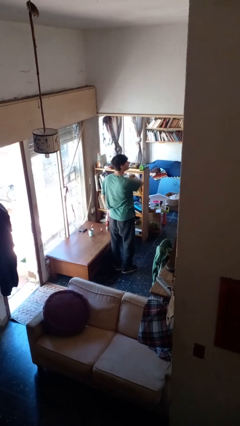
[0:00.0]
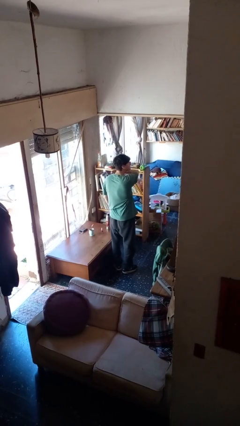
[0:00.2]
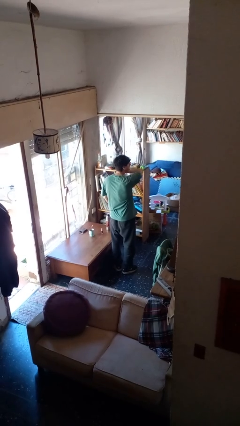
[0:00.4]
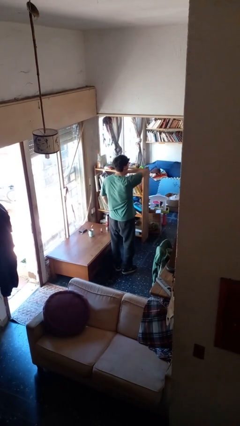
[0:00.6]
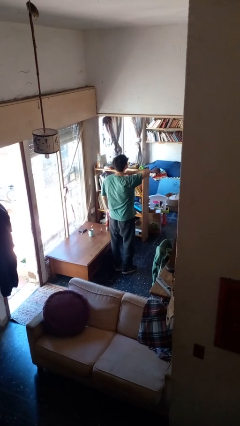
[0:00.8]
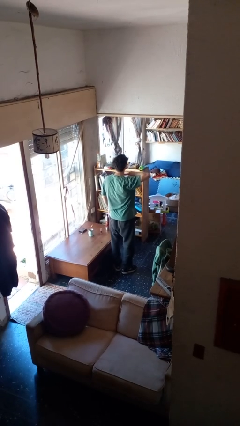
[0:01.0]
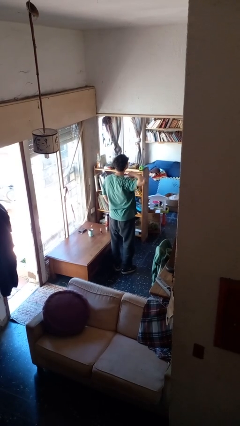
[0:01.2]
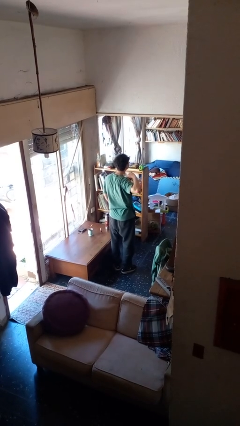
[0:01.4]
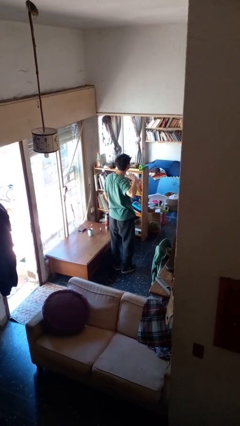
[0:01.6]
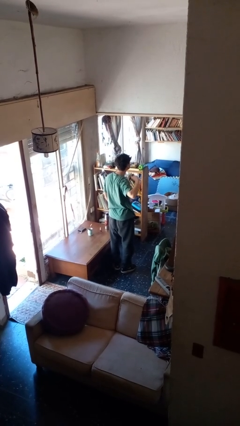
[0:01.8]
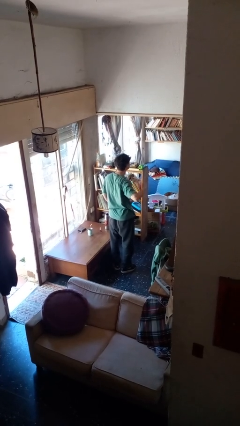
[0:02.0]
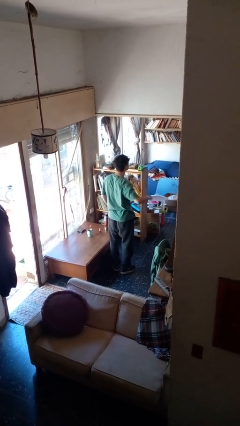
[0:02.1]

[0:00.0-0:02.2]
person gestures cut

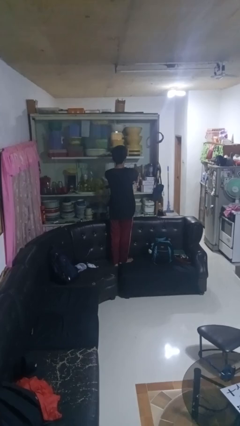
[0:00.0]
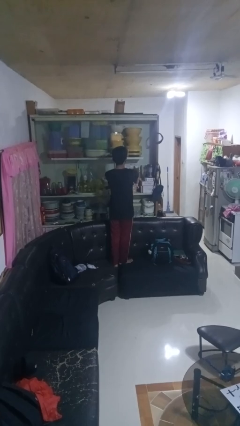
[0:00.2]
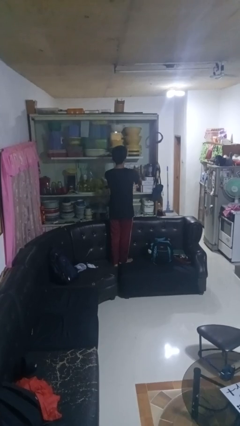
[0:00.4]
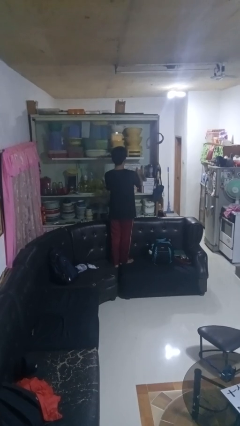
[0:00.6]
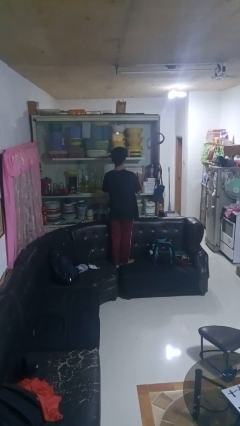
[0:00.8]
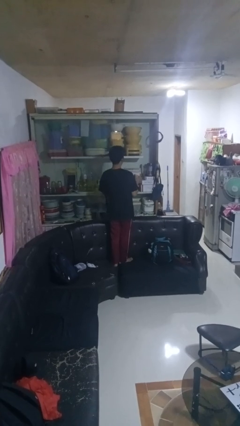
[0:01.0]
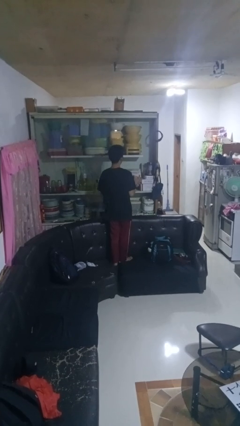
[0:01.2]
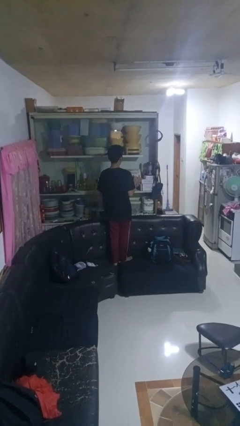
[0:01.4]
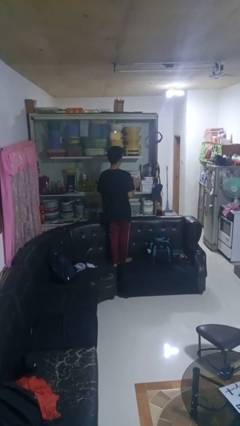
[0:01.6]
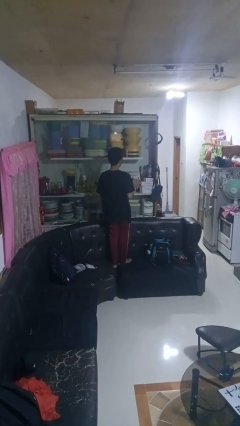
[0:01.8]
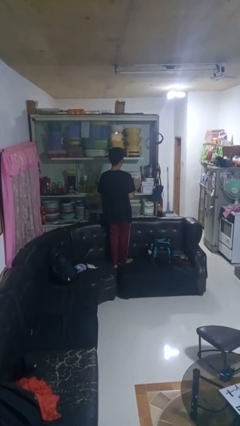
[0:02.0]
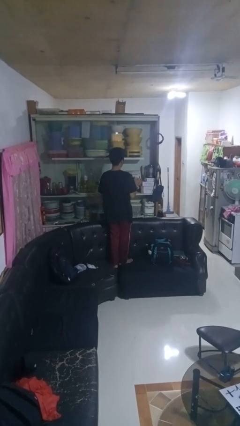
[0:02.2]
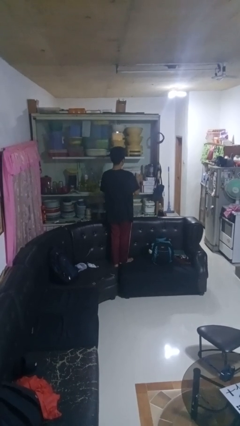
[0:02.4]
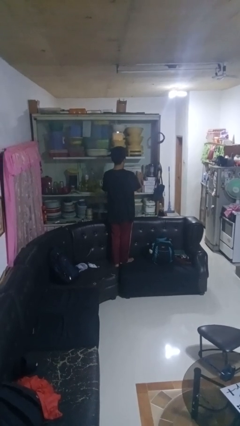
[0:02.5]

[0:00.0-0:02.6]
person picks up object from cabinet

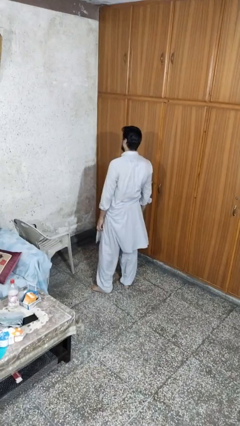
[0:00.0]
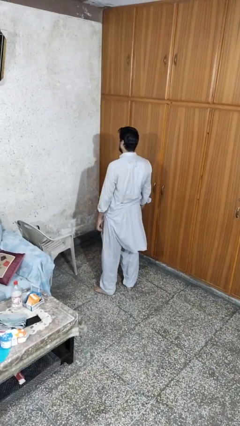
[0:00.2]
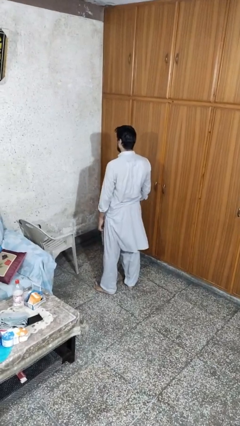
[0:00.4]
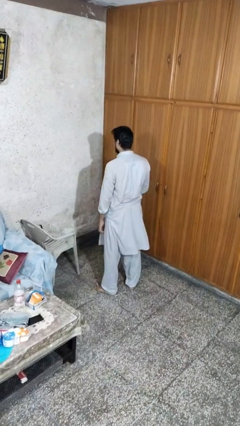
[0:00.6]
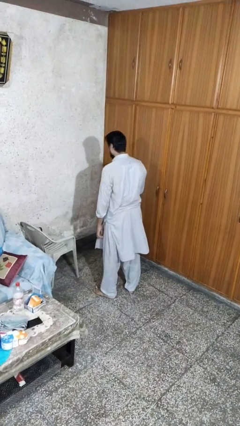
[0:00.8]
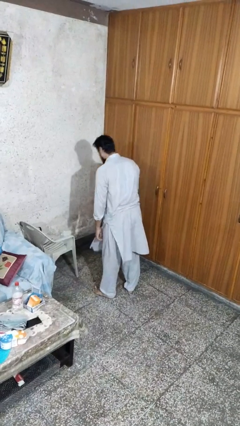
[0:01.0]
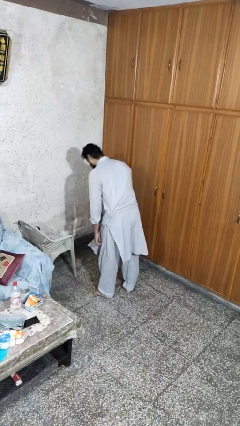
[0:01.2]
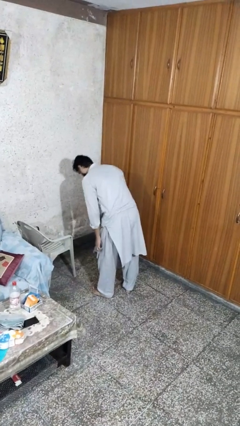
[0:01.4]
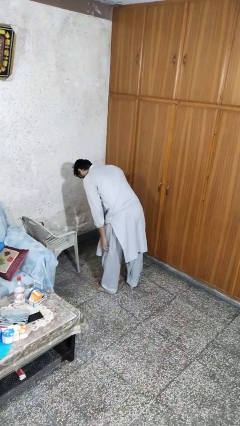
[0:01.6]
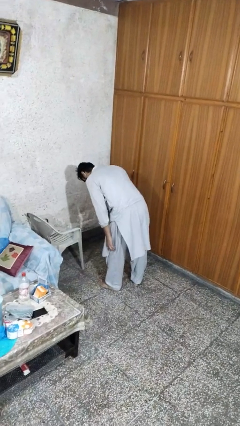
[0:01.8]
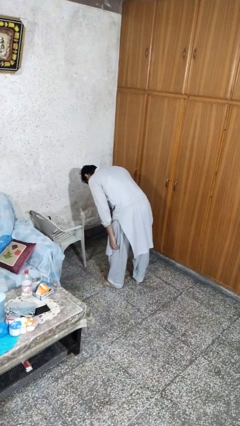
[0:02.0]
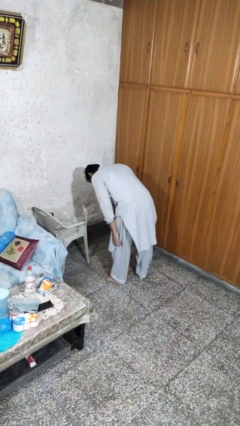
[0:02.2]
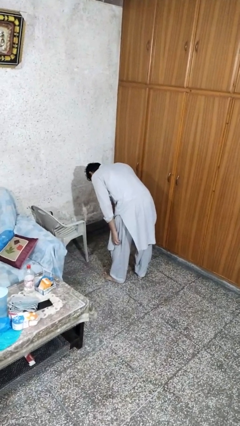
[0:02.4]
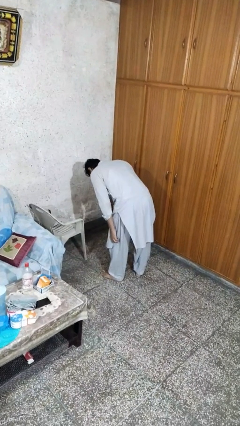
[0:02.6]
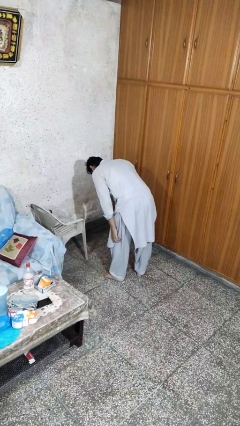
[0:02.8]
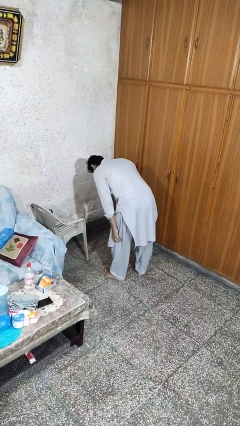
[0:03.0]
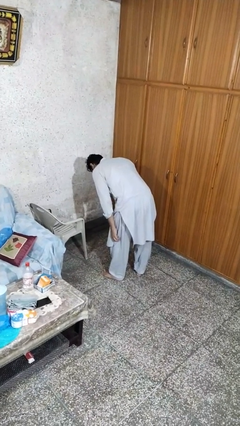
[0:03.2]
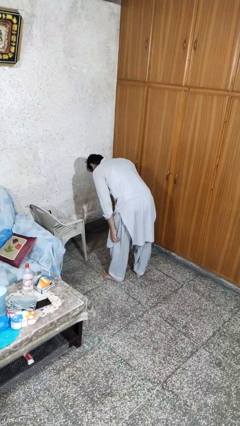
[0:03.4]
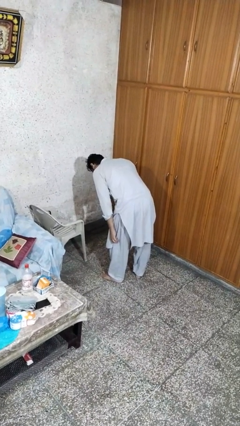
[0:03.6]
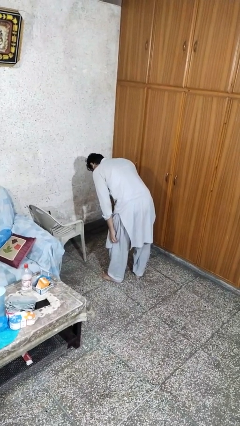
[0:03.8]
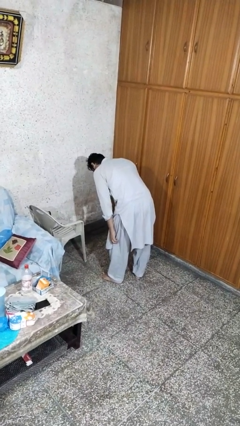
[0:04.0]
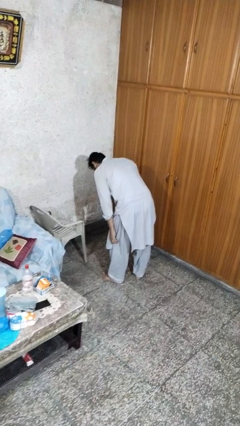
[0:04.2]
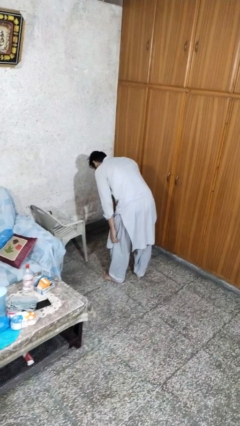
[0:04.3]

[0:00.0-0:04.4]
person bows

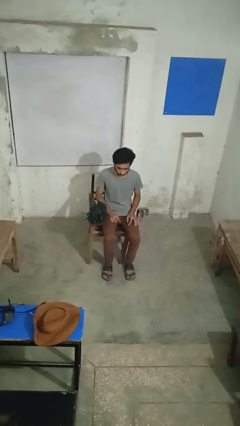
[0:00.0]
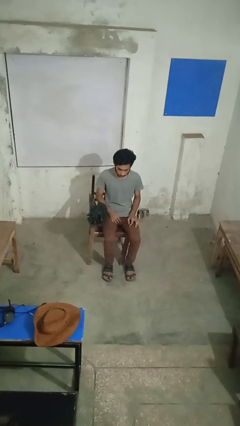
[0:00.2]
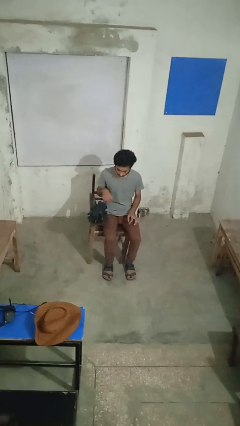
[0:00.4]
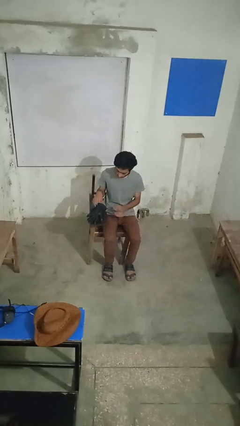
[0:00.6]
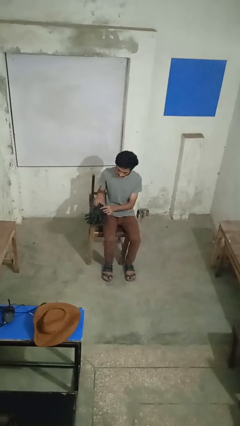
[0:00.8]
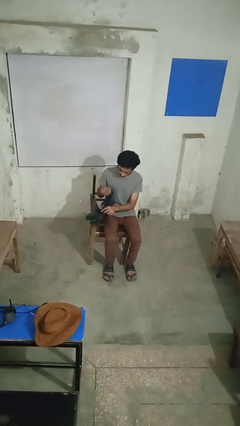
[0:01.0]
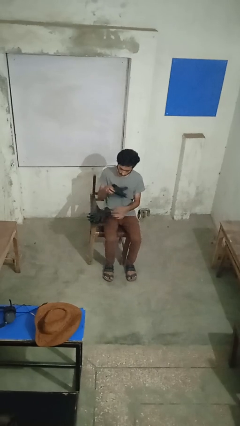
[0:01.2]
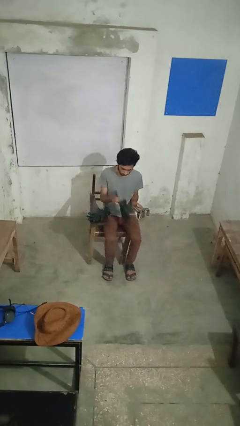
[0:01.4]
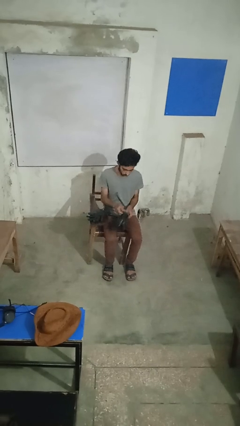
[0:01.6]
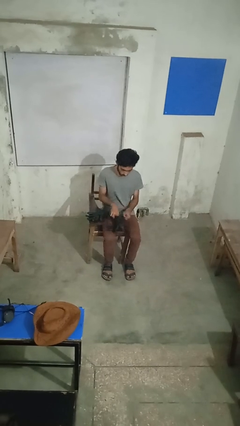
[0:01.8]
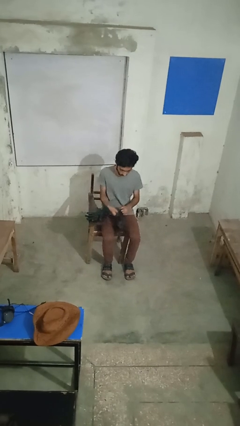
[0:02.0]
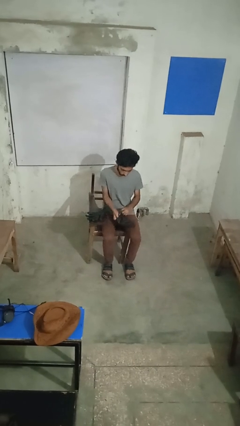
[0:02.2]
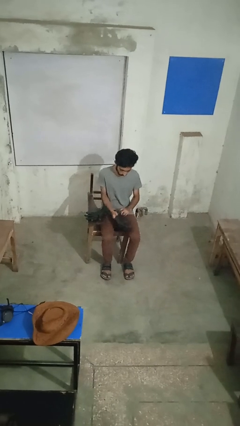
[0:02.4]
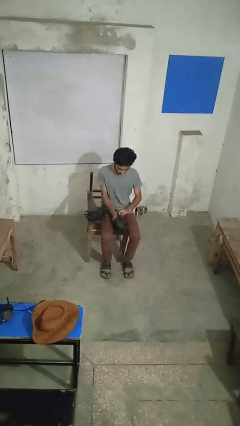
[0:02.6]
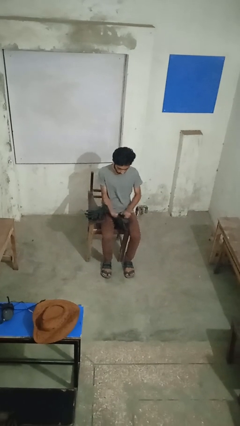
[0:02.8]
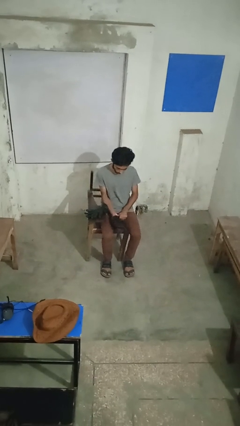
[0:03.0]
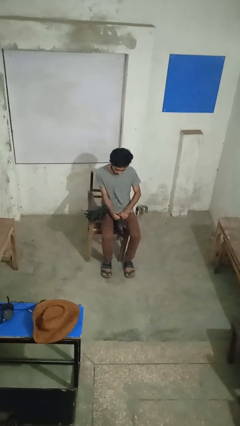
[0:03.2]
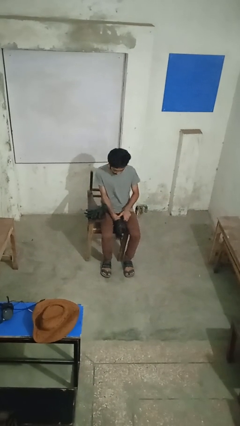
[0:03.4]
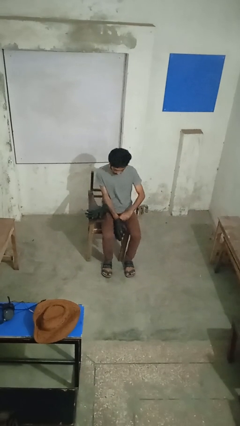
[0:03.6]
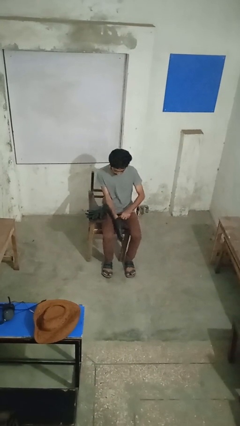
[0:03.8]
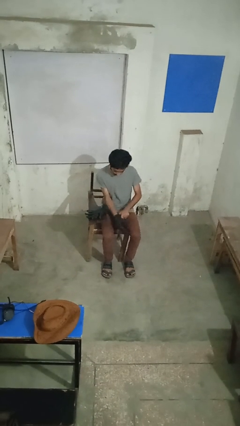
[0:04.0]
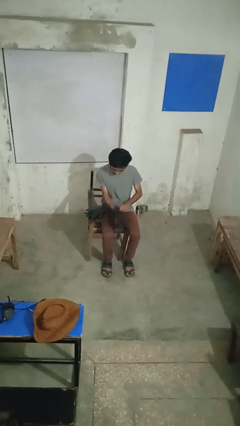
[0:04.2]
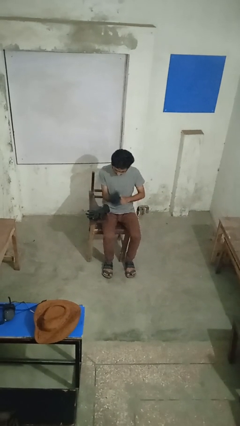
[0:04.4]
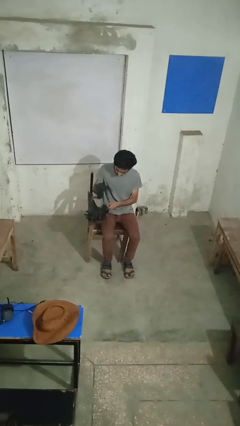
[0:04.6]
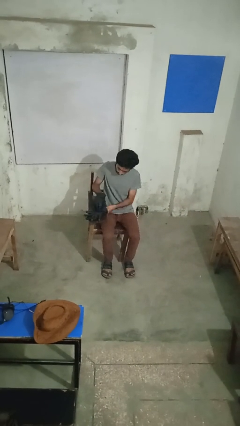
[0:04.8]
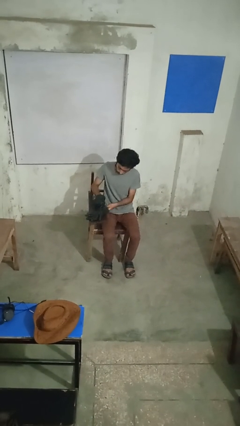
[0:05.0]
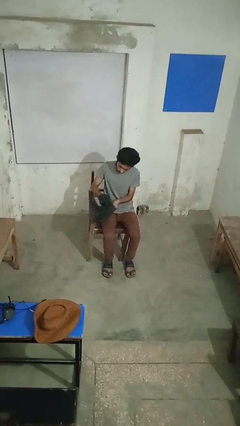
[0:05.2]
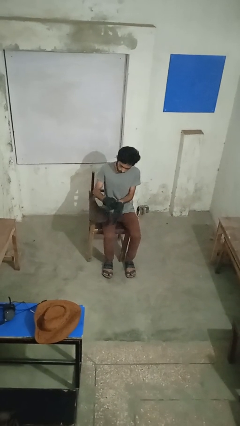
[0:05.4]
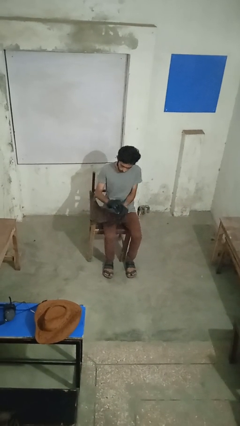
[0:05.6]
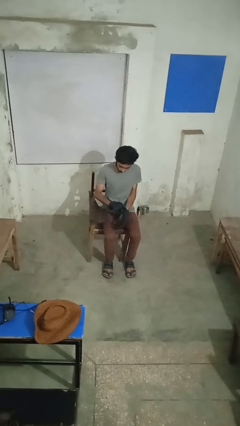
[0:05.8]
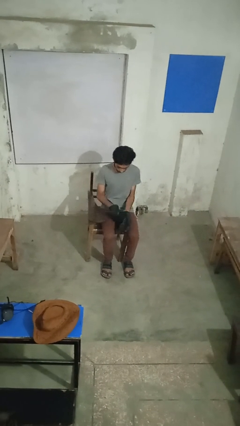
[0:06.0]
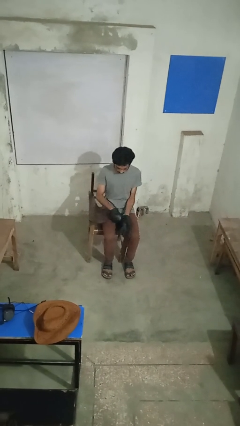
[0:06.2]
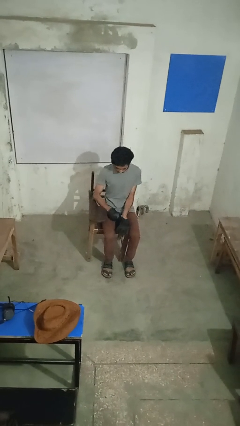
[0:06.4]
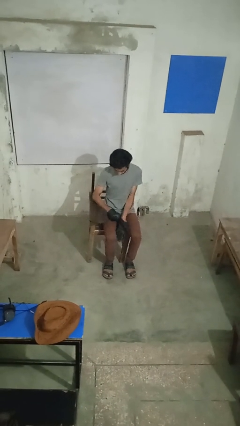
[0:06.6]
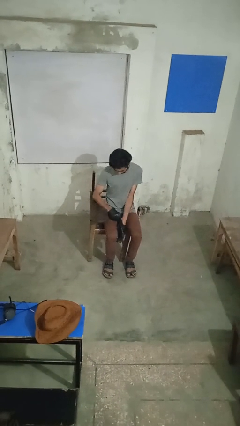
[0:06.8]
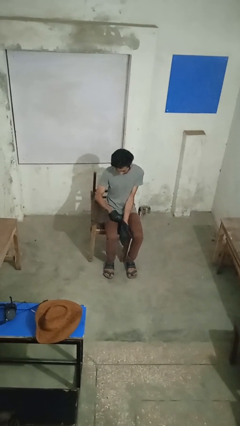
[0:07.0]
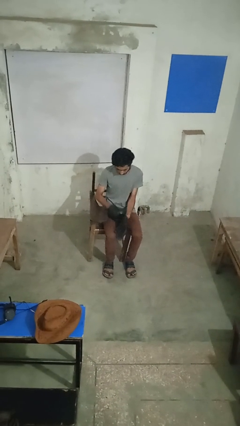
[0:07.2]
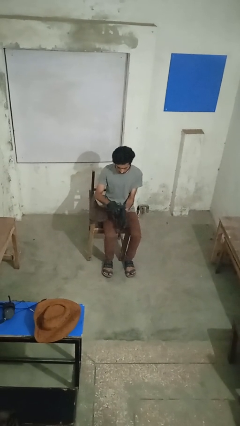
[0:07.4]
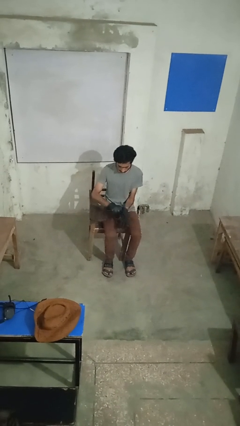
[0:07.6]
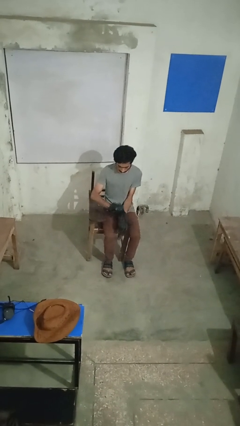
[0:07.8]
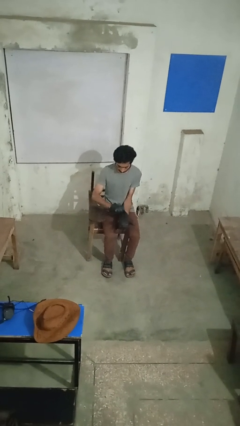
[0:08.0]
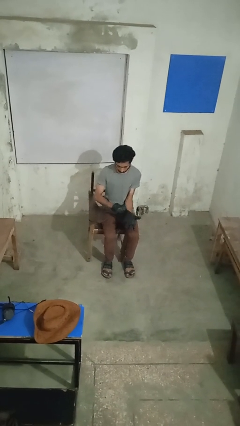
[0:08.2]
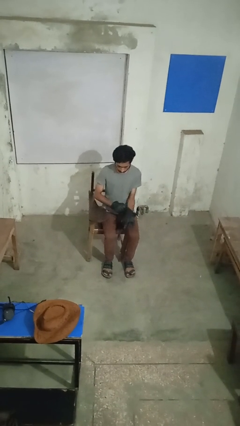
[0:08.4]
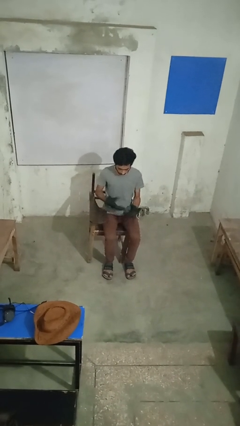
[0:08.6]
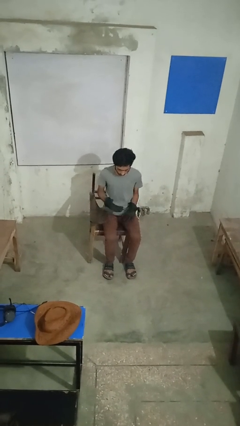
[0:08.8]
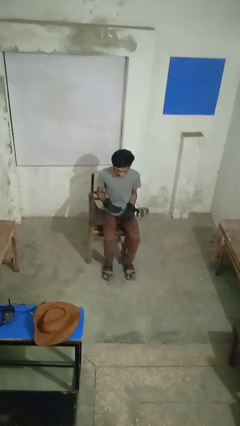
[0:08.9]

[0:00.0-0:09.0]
person puts on gloves
